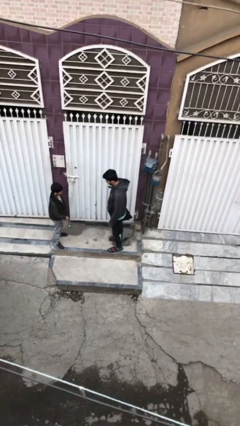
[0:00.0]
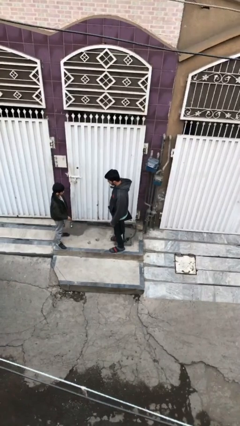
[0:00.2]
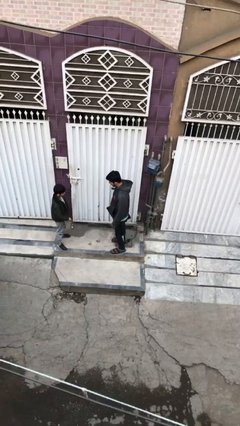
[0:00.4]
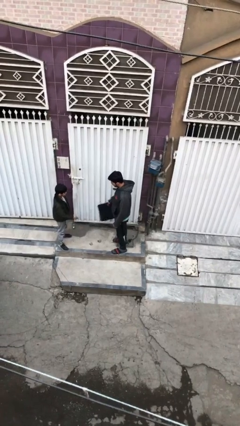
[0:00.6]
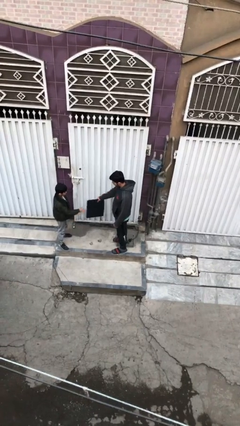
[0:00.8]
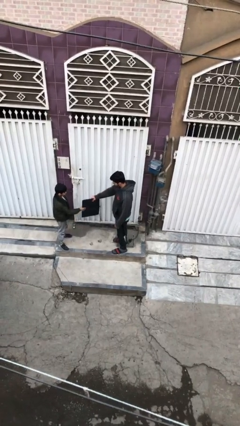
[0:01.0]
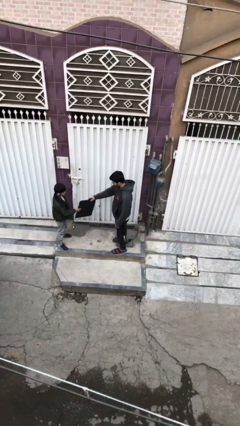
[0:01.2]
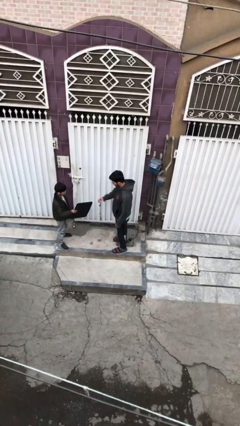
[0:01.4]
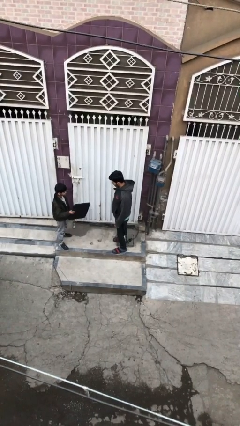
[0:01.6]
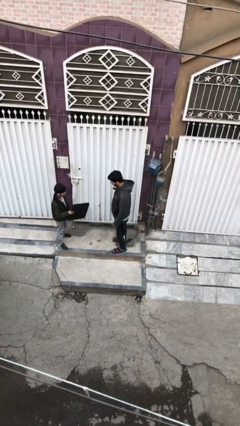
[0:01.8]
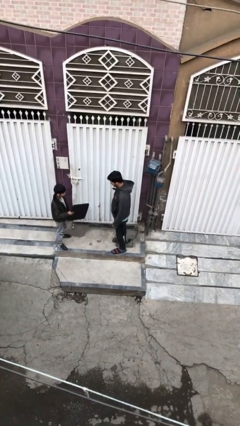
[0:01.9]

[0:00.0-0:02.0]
person transfers object to person

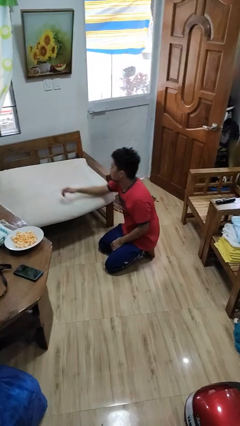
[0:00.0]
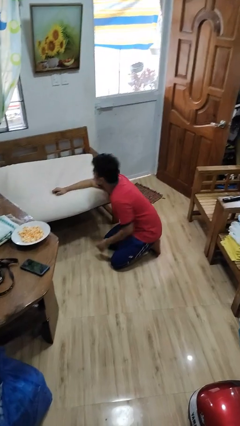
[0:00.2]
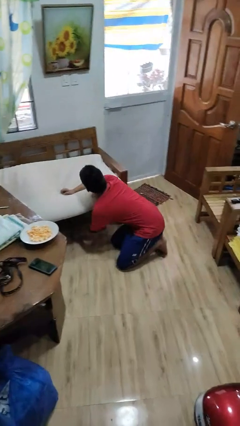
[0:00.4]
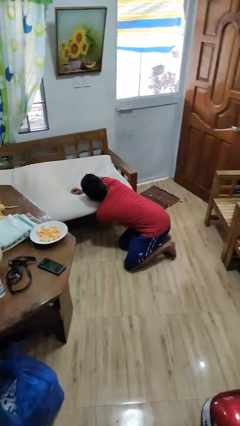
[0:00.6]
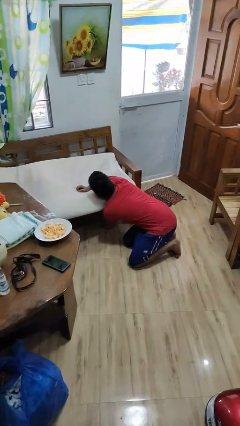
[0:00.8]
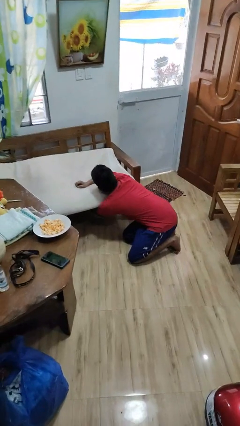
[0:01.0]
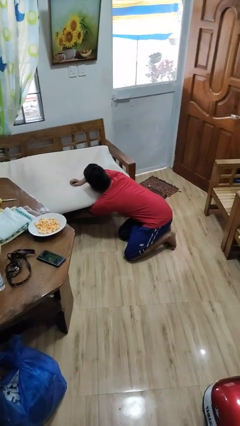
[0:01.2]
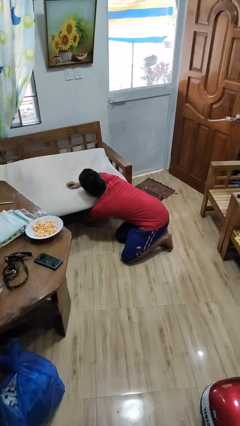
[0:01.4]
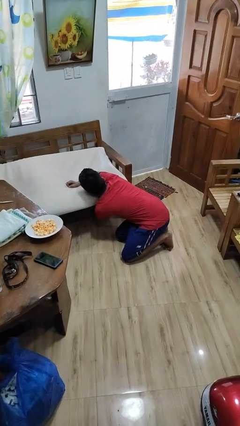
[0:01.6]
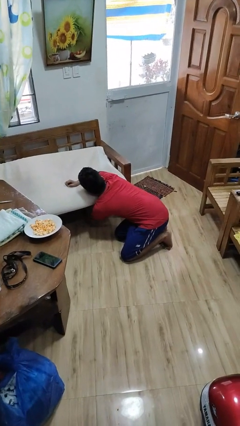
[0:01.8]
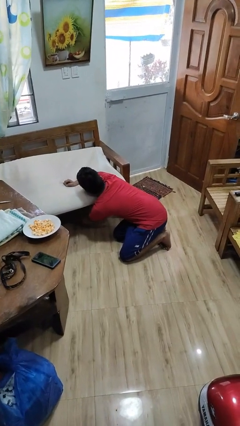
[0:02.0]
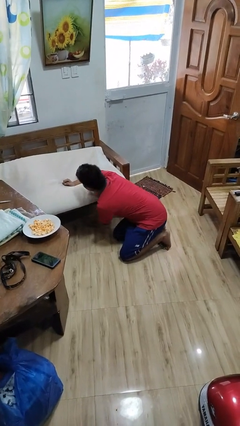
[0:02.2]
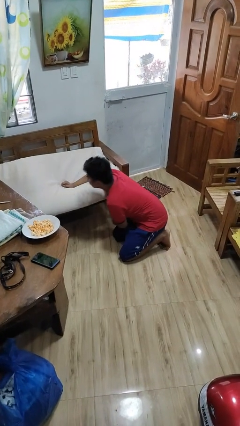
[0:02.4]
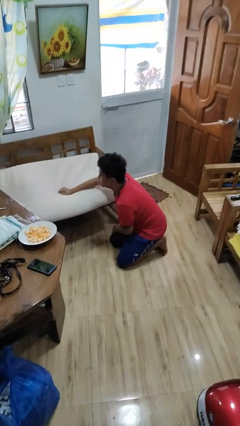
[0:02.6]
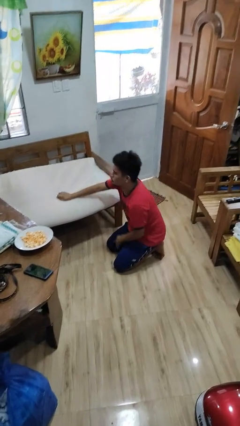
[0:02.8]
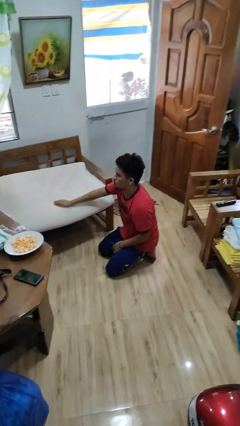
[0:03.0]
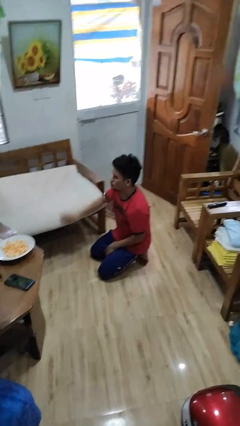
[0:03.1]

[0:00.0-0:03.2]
person searches under couch

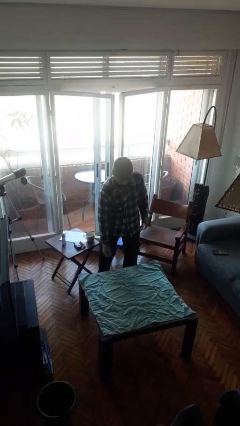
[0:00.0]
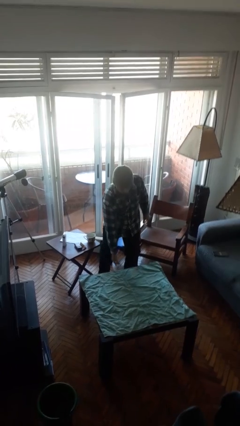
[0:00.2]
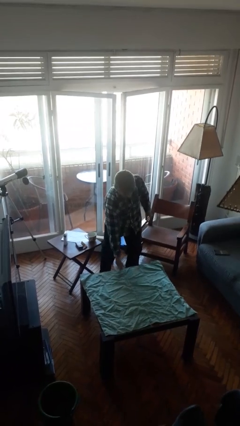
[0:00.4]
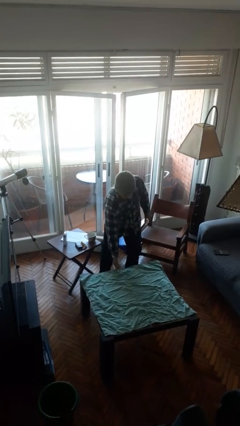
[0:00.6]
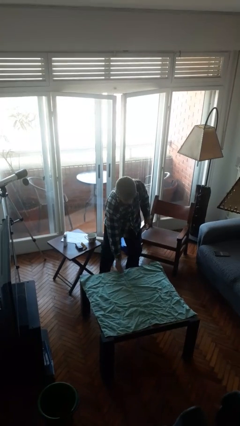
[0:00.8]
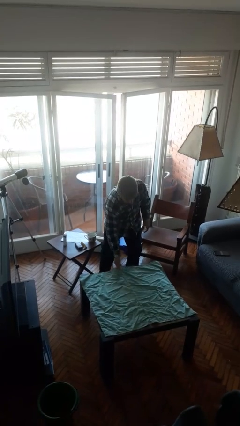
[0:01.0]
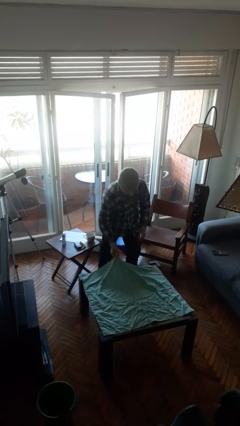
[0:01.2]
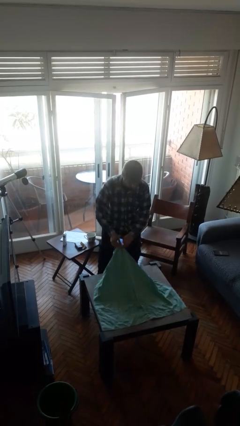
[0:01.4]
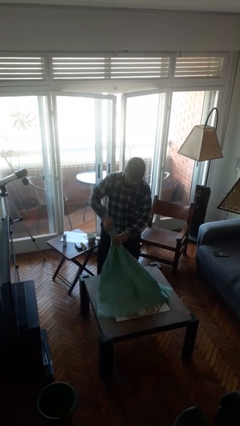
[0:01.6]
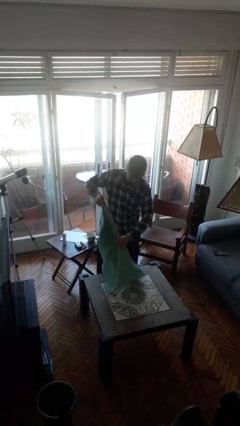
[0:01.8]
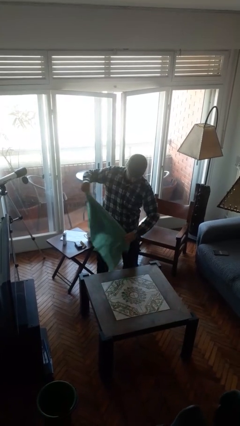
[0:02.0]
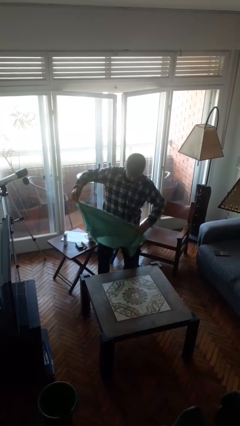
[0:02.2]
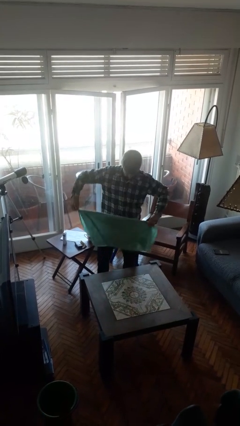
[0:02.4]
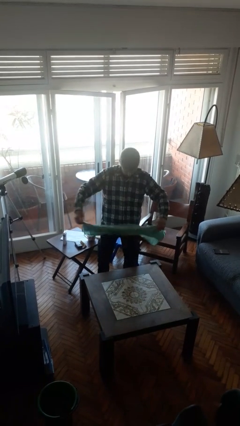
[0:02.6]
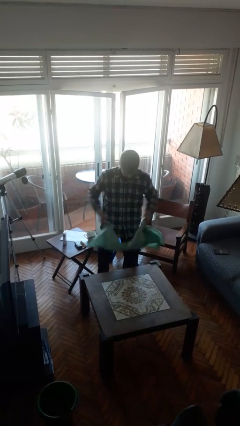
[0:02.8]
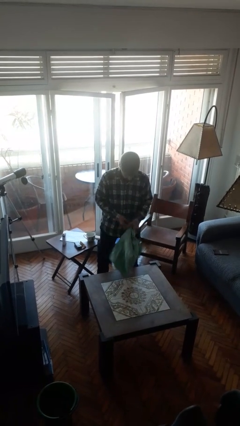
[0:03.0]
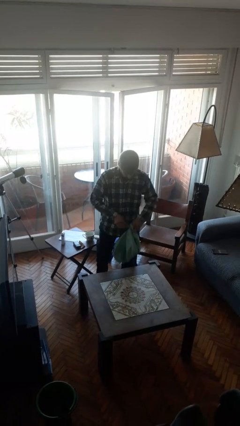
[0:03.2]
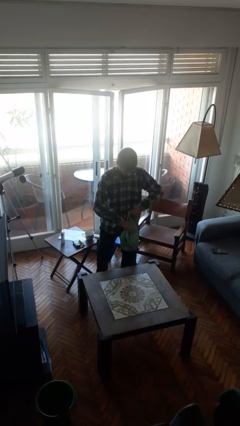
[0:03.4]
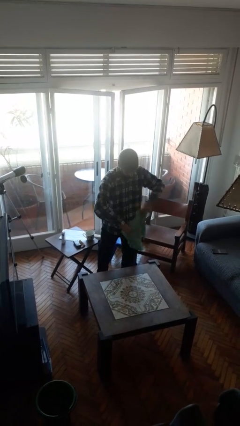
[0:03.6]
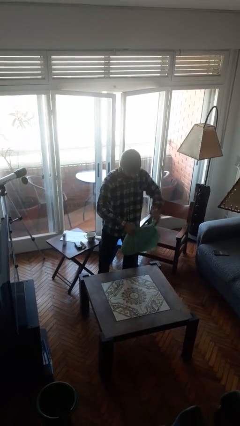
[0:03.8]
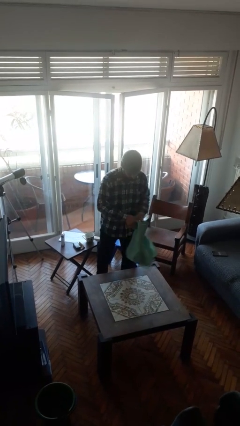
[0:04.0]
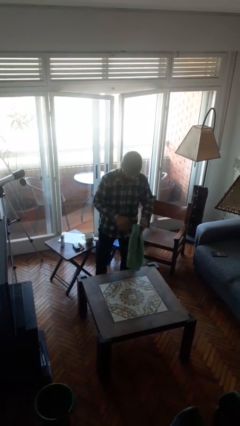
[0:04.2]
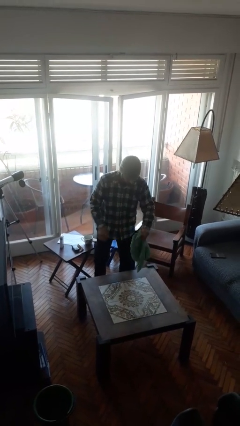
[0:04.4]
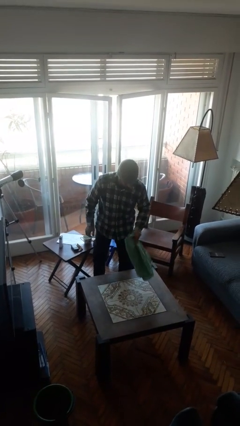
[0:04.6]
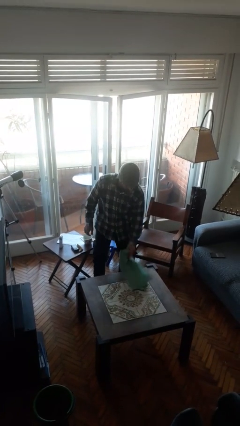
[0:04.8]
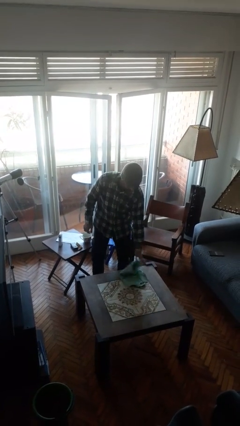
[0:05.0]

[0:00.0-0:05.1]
person folds tablecloth

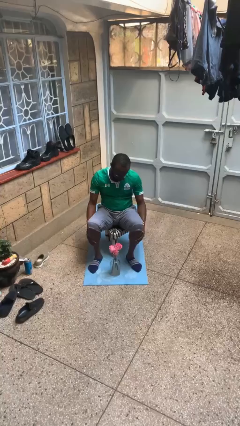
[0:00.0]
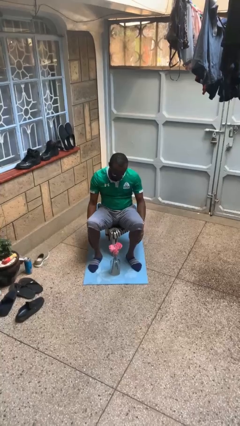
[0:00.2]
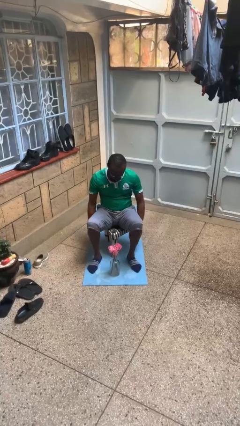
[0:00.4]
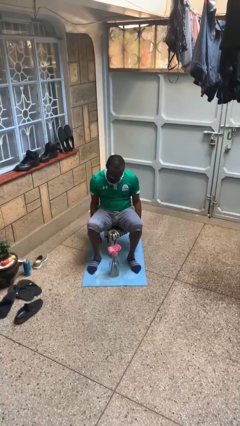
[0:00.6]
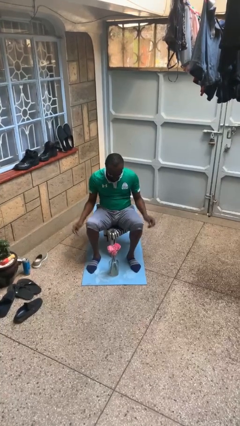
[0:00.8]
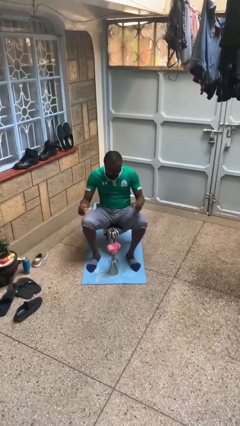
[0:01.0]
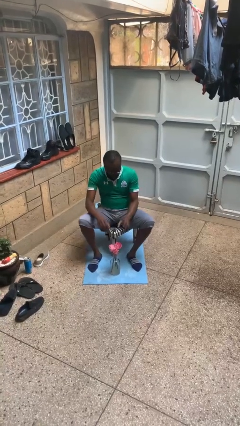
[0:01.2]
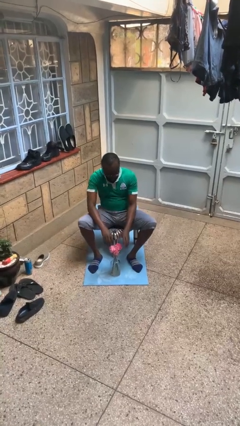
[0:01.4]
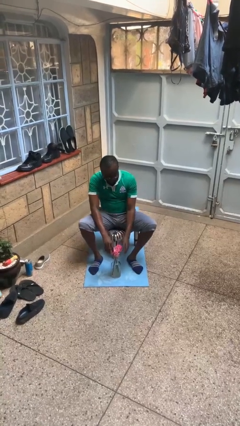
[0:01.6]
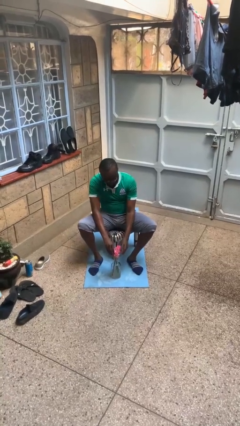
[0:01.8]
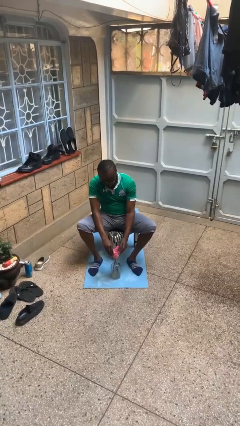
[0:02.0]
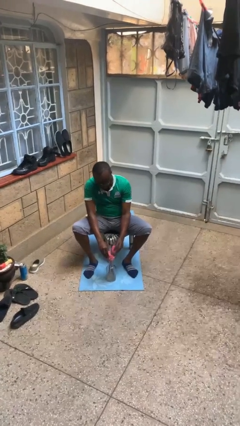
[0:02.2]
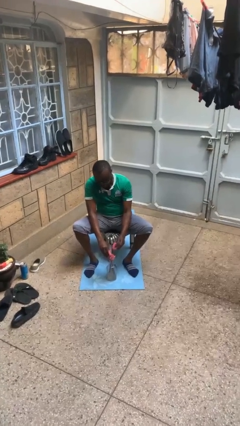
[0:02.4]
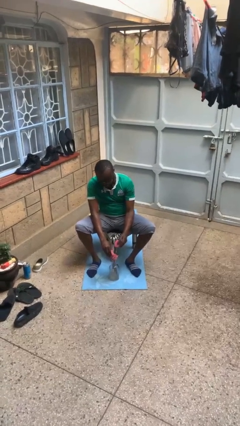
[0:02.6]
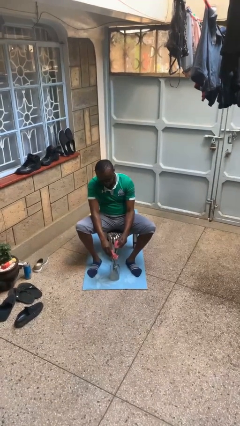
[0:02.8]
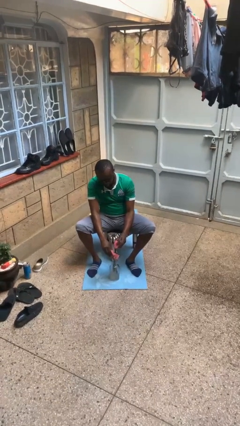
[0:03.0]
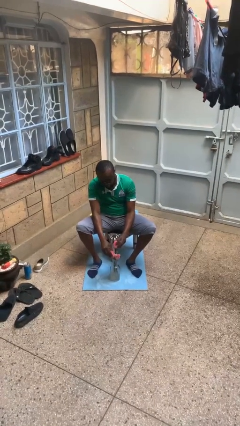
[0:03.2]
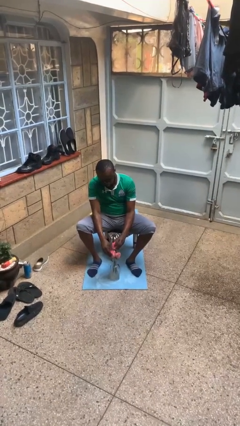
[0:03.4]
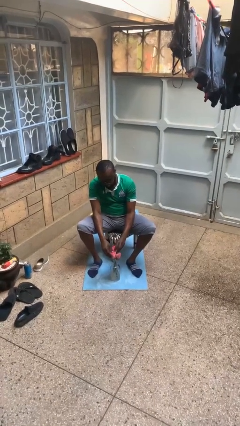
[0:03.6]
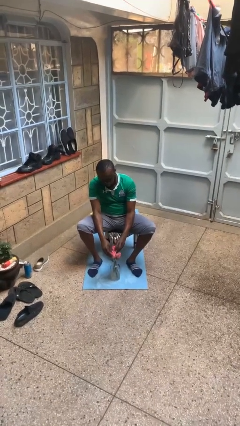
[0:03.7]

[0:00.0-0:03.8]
person arranges flowers in vase

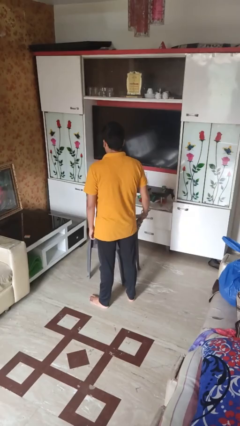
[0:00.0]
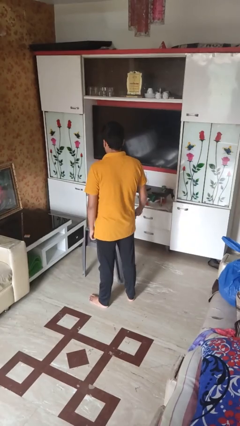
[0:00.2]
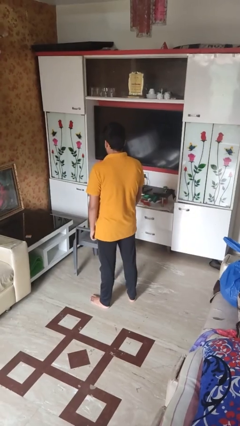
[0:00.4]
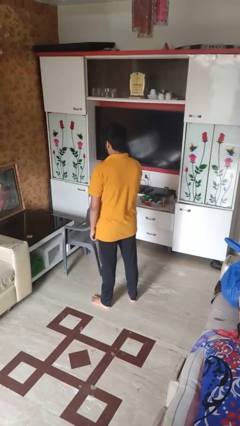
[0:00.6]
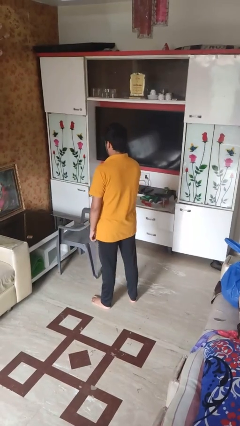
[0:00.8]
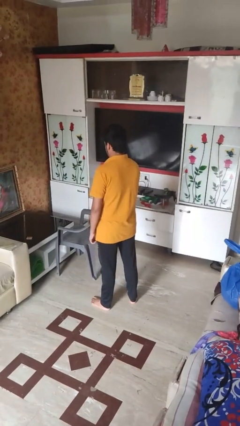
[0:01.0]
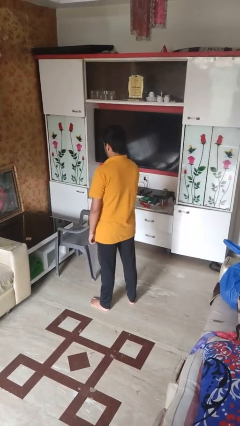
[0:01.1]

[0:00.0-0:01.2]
person pushes in chair

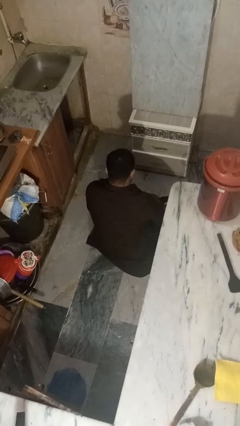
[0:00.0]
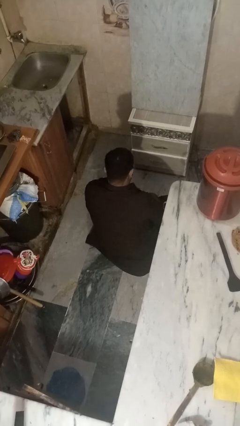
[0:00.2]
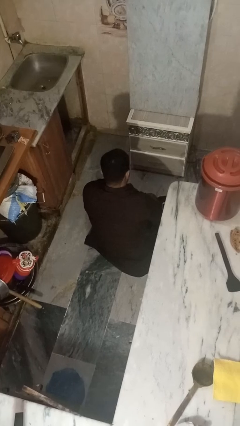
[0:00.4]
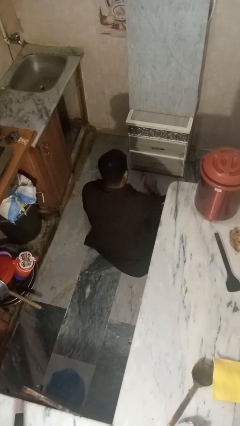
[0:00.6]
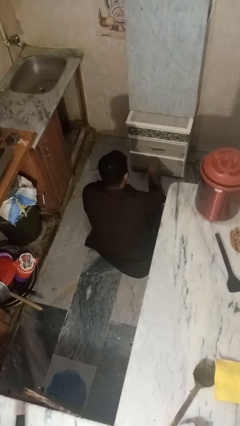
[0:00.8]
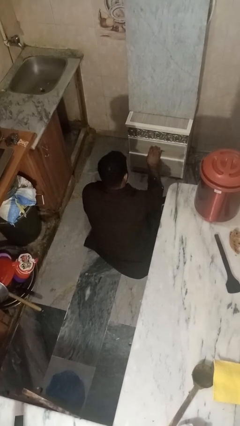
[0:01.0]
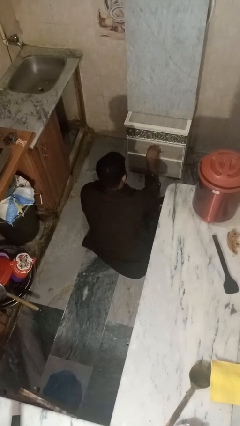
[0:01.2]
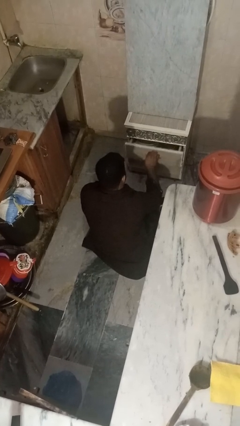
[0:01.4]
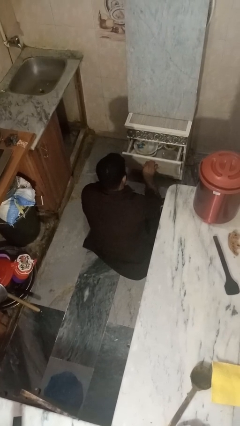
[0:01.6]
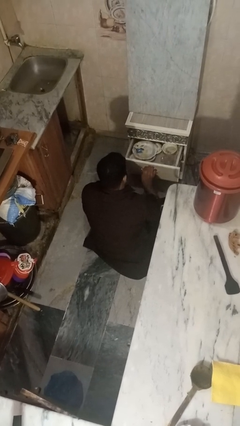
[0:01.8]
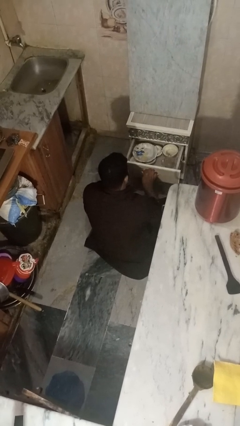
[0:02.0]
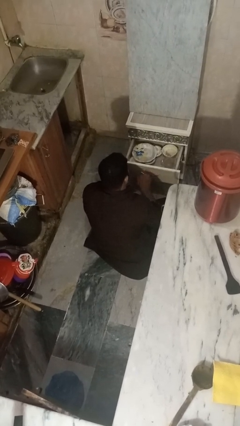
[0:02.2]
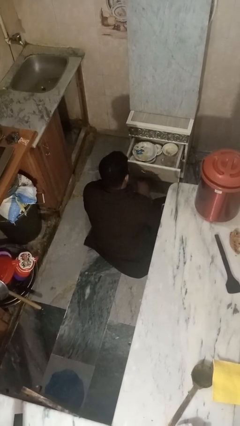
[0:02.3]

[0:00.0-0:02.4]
person opens kitchen drawer
